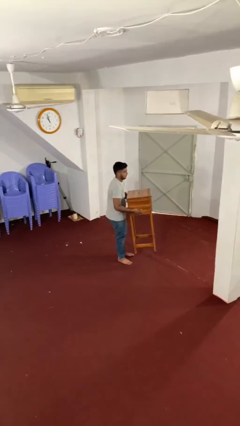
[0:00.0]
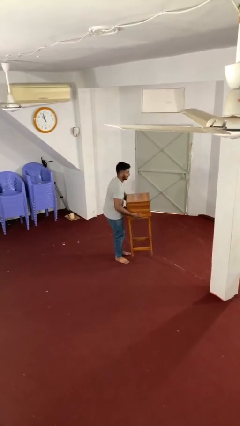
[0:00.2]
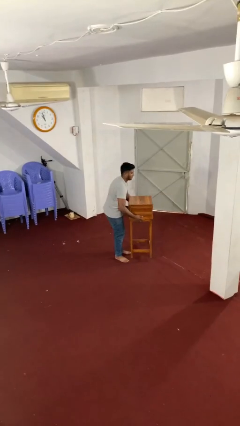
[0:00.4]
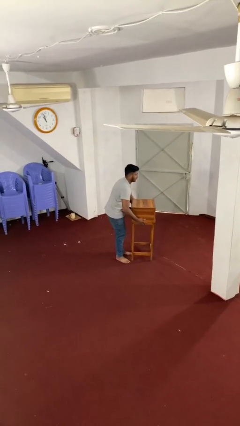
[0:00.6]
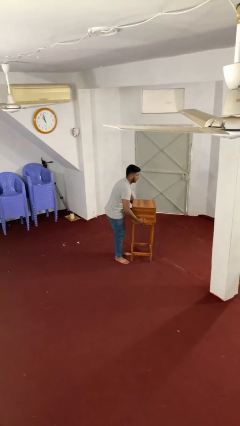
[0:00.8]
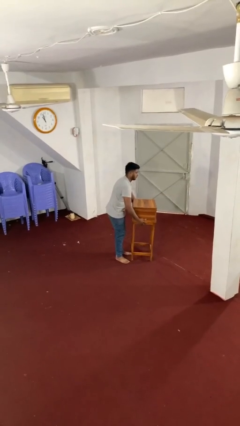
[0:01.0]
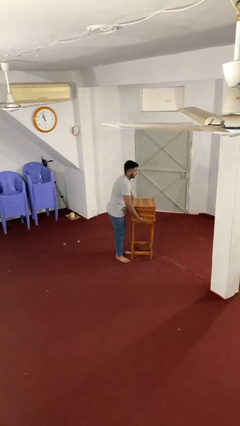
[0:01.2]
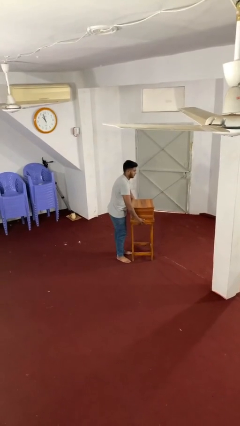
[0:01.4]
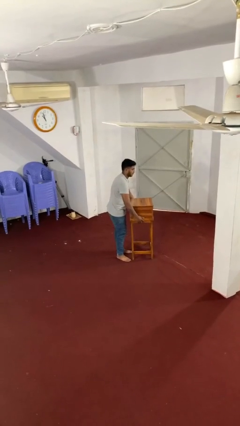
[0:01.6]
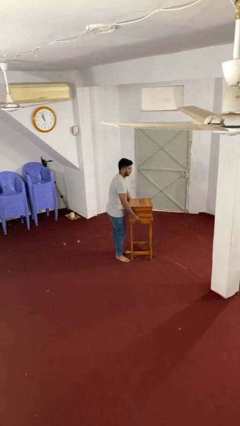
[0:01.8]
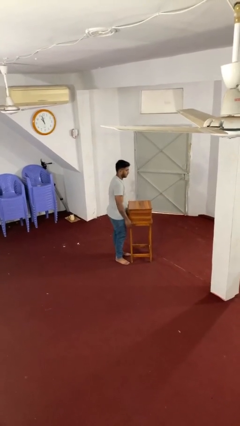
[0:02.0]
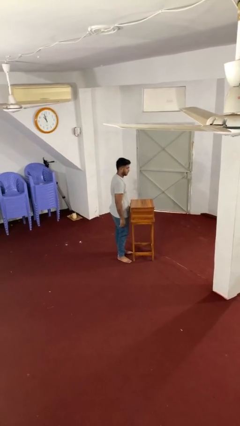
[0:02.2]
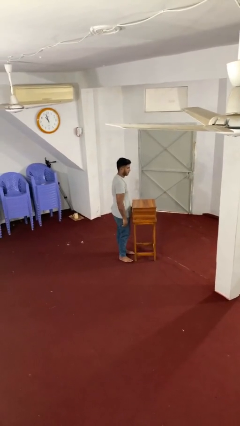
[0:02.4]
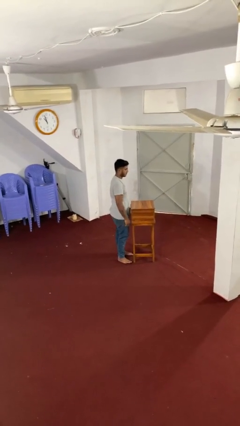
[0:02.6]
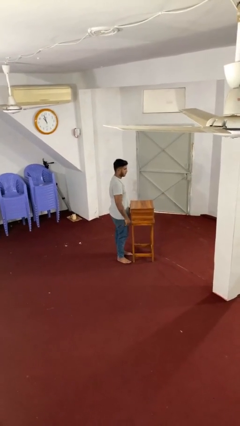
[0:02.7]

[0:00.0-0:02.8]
person puts down object on floor

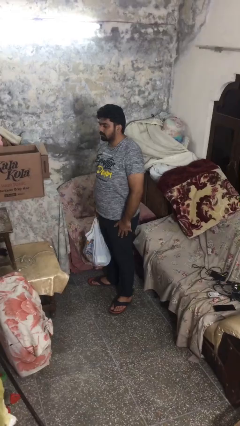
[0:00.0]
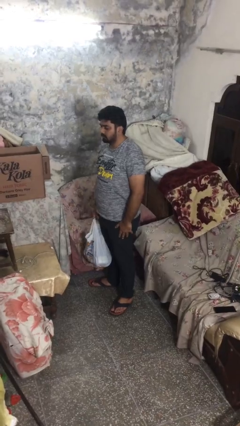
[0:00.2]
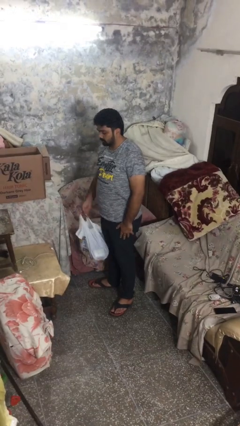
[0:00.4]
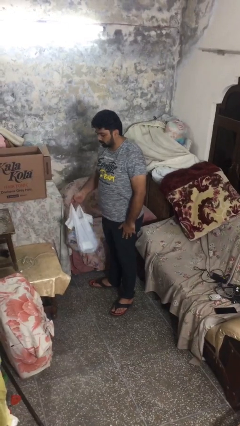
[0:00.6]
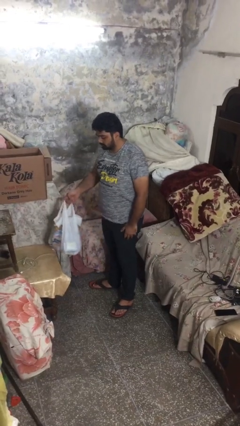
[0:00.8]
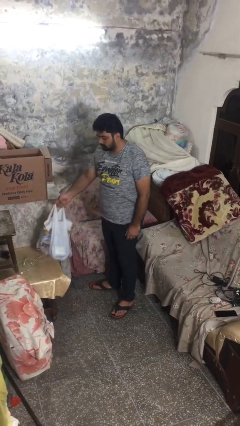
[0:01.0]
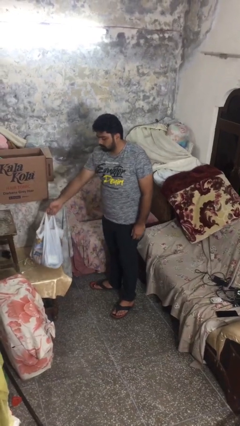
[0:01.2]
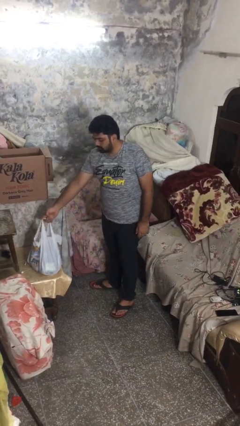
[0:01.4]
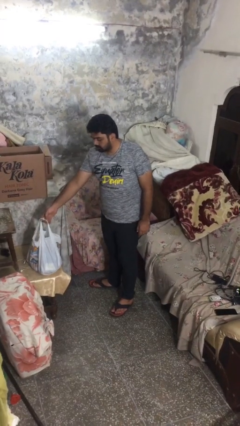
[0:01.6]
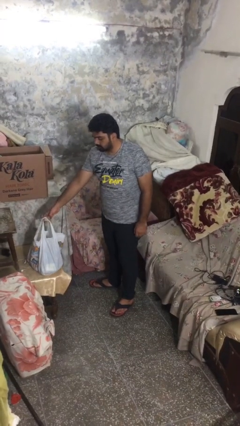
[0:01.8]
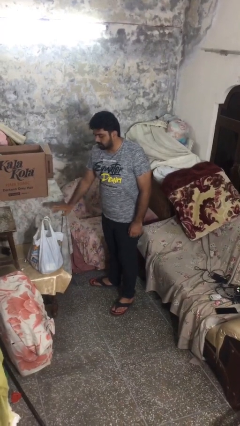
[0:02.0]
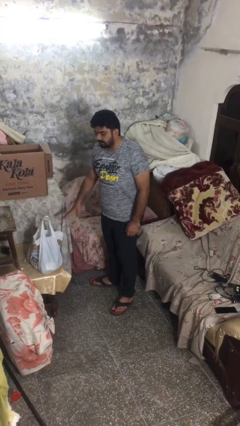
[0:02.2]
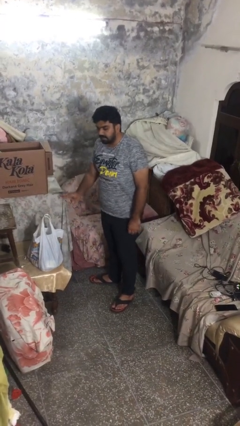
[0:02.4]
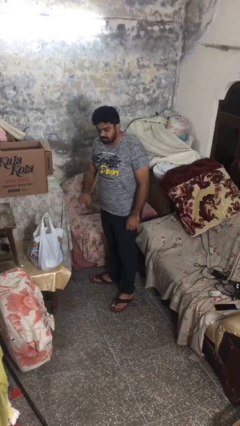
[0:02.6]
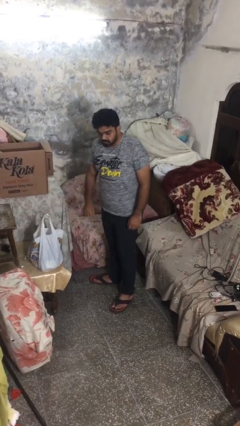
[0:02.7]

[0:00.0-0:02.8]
person puts down object on table

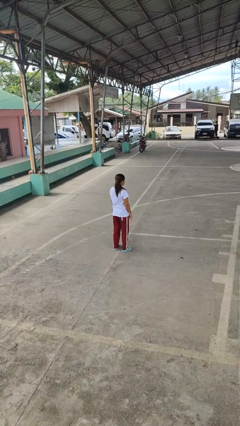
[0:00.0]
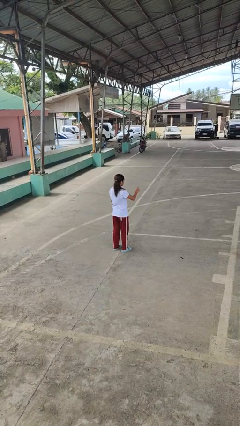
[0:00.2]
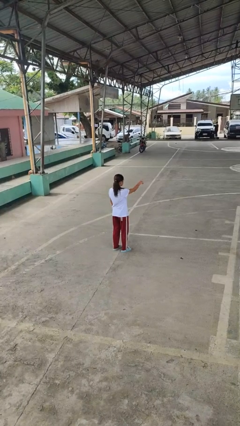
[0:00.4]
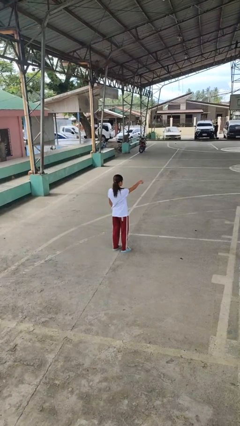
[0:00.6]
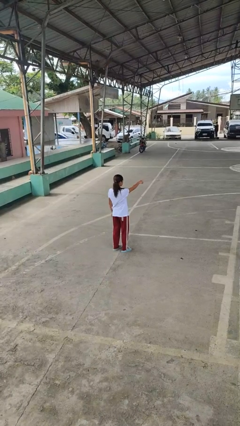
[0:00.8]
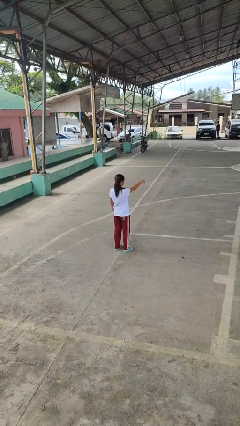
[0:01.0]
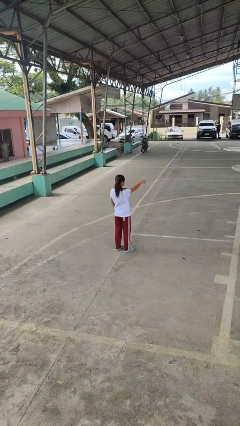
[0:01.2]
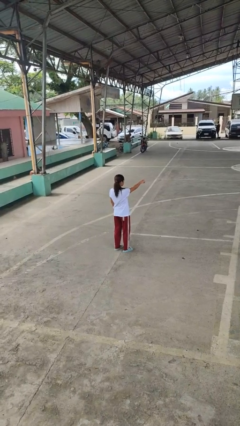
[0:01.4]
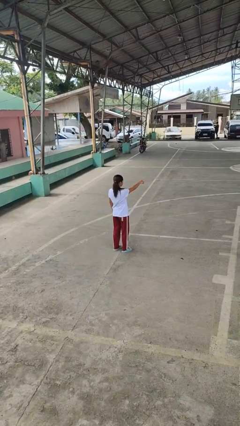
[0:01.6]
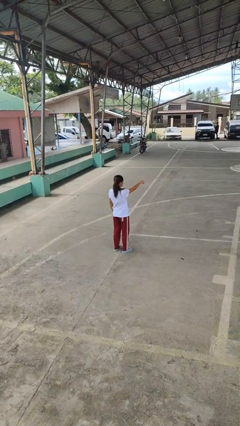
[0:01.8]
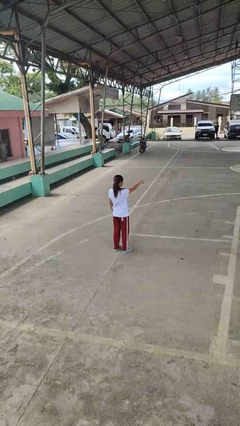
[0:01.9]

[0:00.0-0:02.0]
person points at person

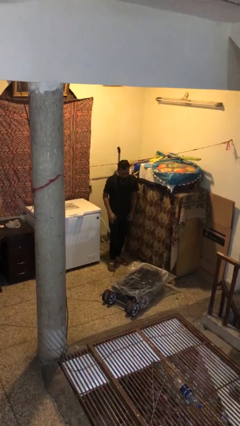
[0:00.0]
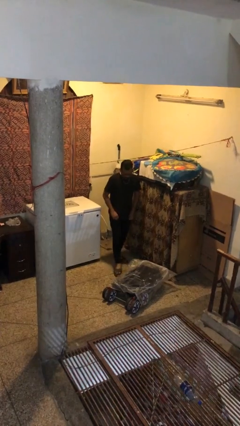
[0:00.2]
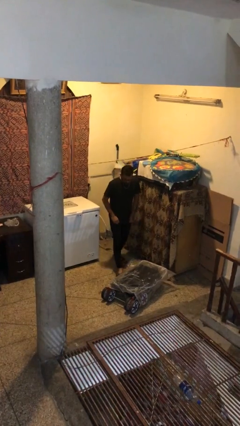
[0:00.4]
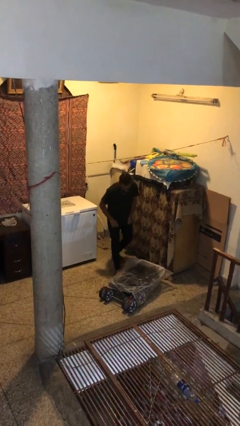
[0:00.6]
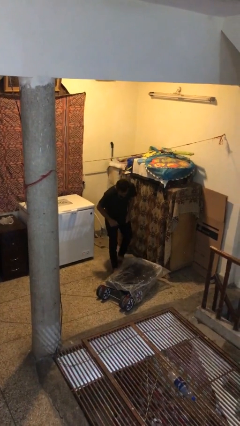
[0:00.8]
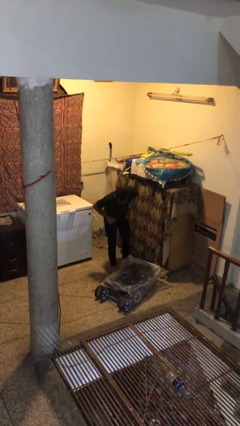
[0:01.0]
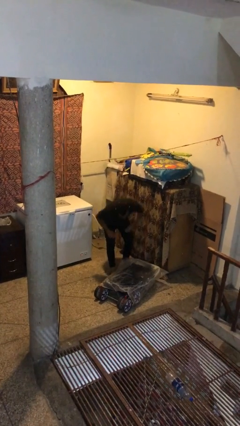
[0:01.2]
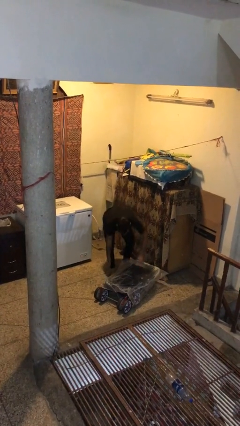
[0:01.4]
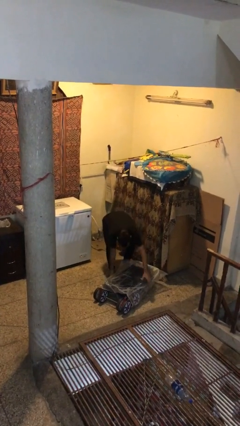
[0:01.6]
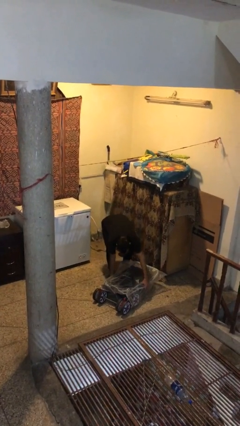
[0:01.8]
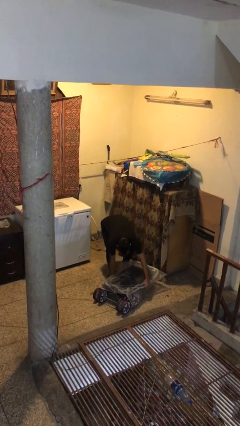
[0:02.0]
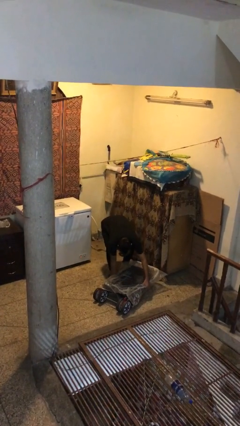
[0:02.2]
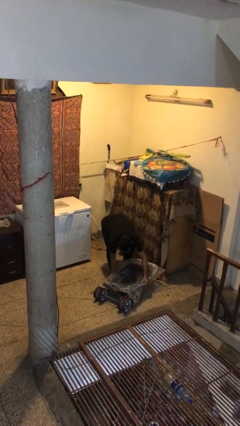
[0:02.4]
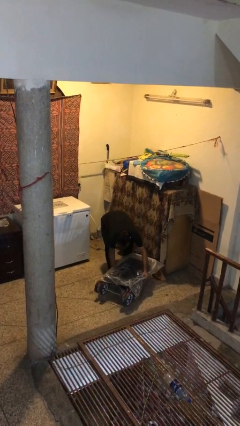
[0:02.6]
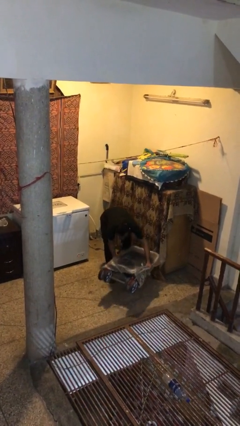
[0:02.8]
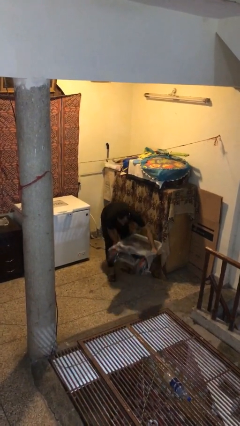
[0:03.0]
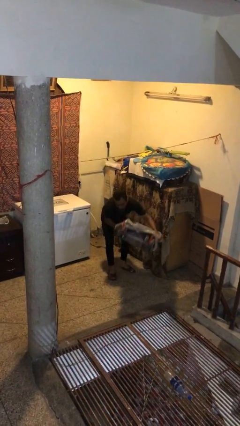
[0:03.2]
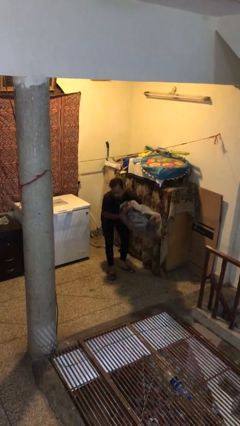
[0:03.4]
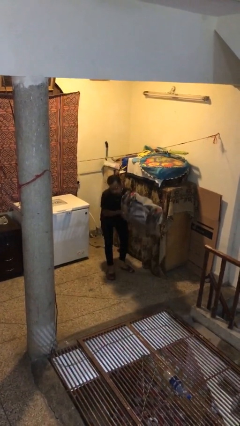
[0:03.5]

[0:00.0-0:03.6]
person picks up object from floor

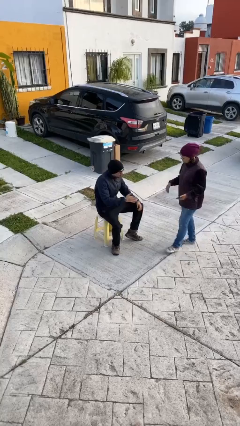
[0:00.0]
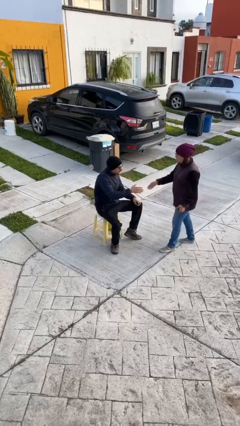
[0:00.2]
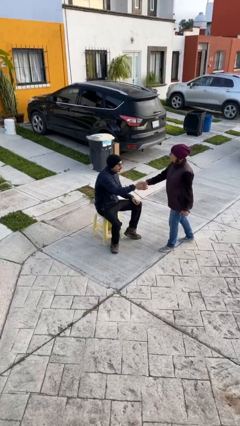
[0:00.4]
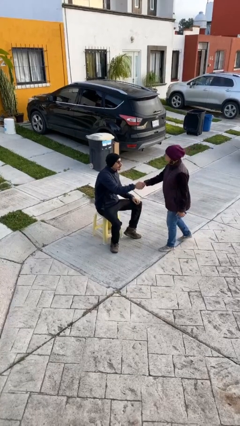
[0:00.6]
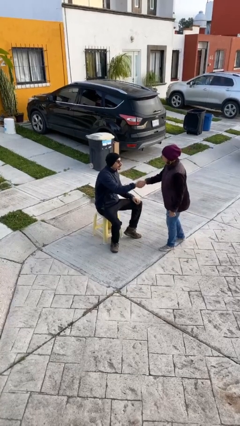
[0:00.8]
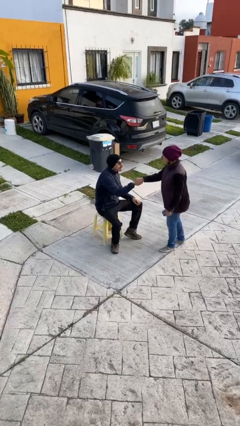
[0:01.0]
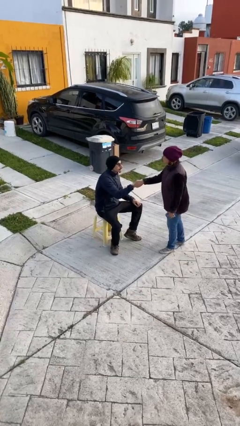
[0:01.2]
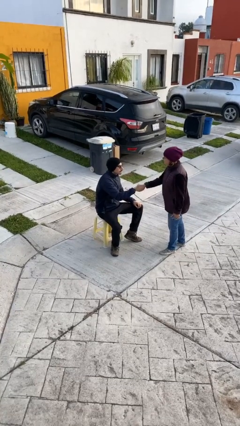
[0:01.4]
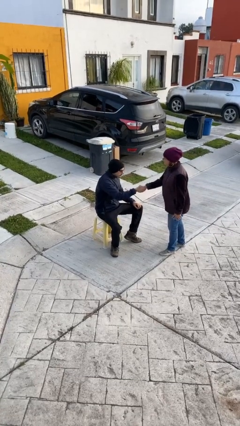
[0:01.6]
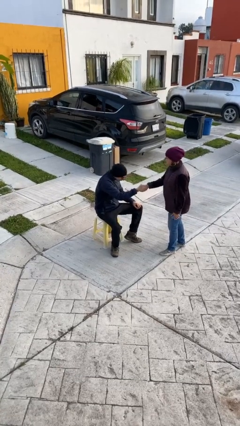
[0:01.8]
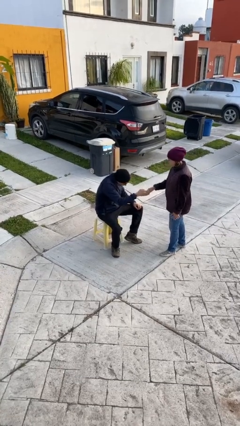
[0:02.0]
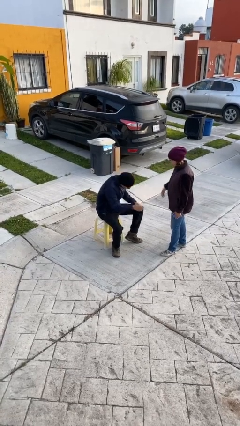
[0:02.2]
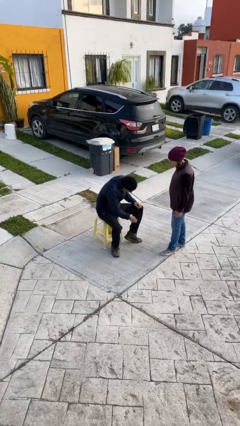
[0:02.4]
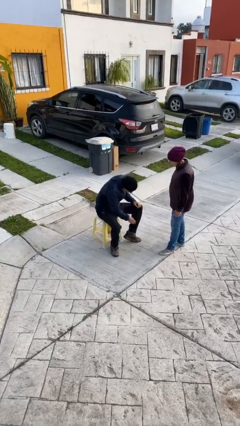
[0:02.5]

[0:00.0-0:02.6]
person shakes hand

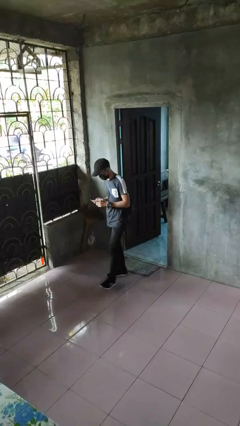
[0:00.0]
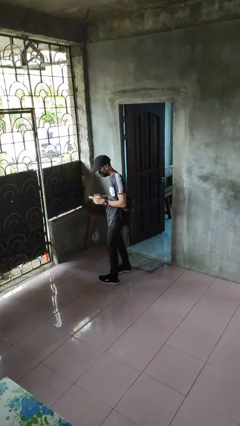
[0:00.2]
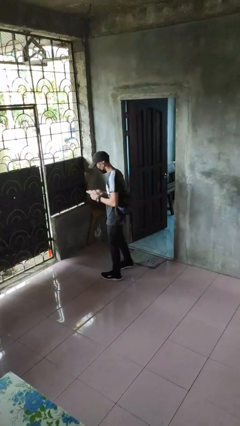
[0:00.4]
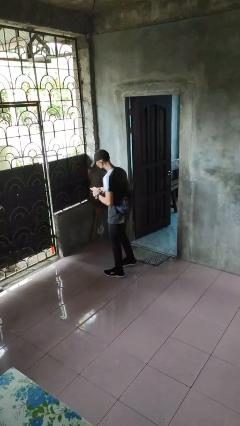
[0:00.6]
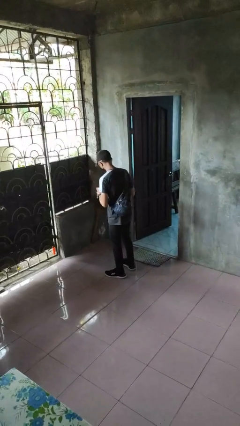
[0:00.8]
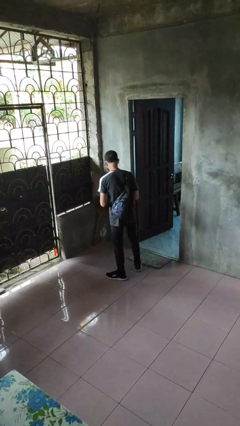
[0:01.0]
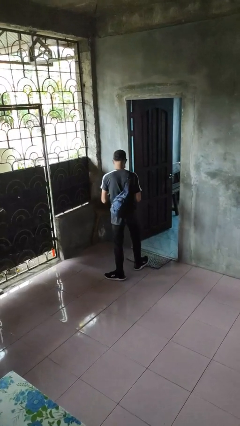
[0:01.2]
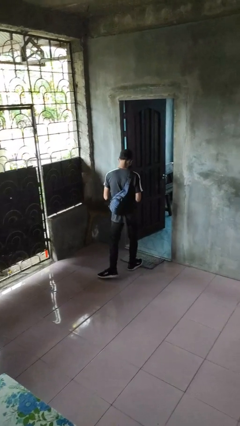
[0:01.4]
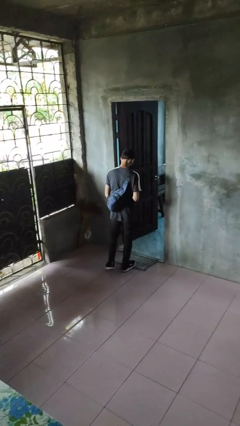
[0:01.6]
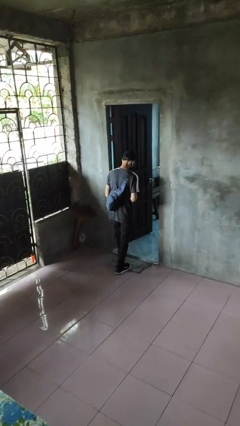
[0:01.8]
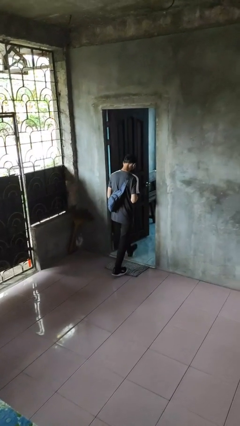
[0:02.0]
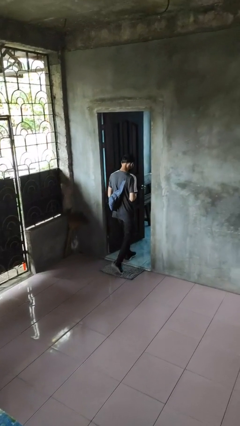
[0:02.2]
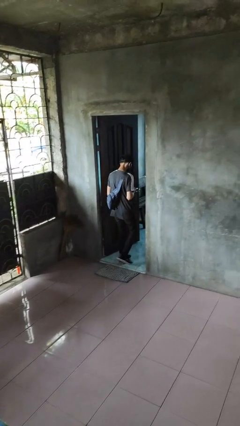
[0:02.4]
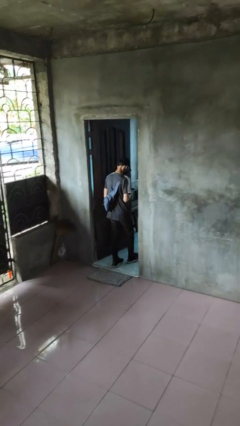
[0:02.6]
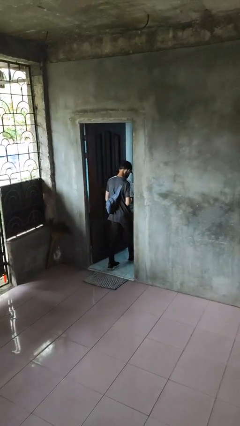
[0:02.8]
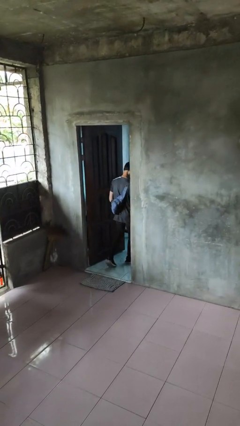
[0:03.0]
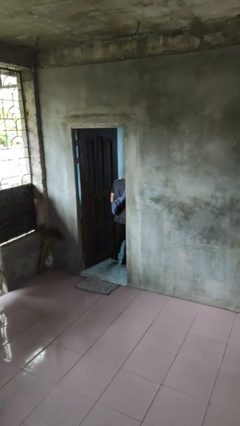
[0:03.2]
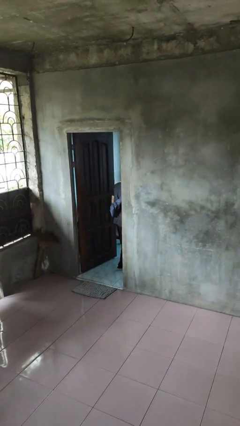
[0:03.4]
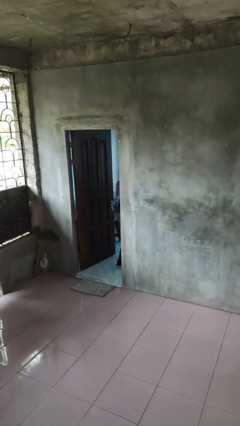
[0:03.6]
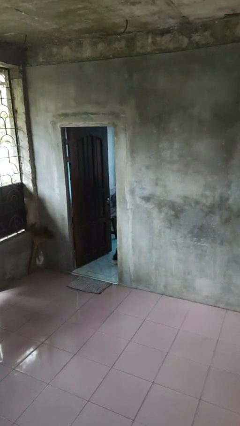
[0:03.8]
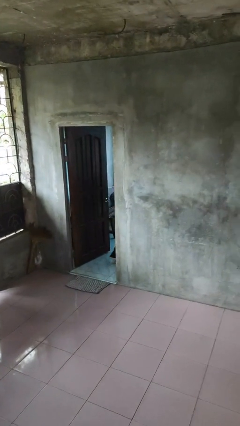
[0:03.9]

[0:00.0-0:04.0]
person exits scene through structure
